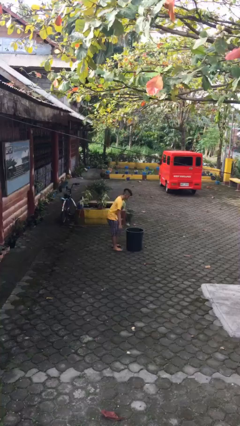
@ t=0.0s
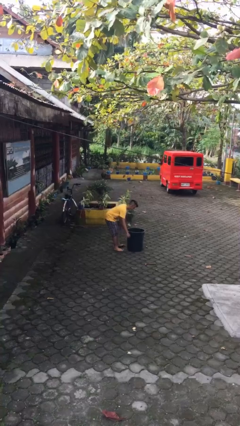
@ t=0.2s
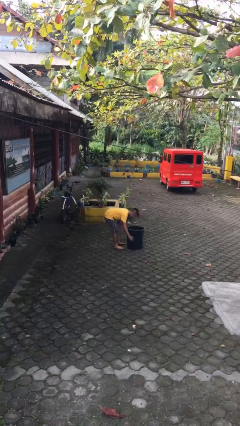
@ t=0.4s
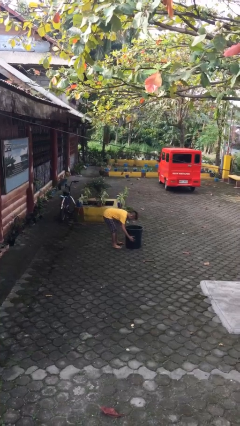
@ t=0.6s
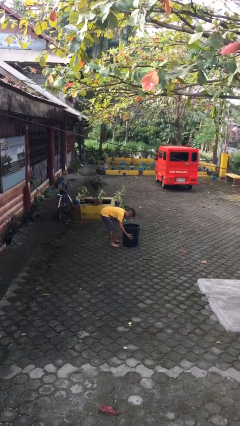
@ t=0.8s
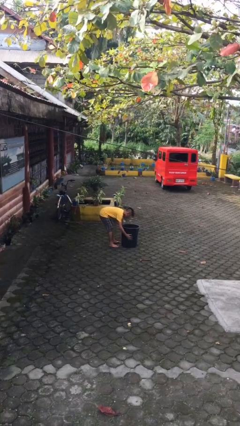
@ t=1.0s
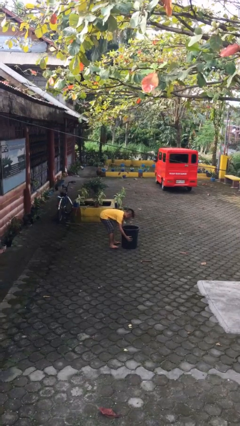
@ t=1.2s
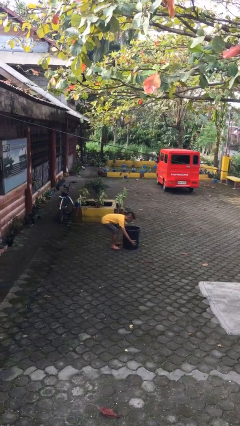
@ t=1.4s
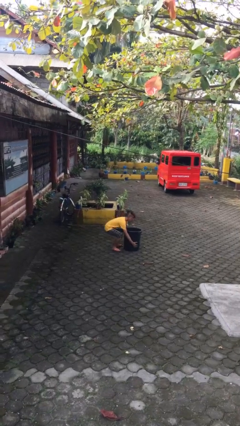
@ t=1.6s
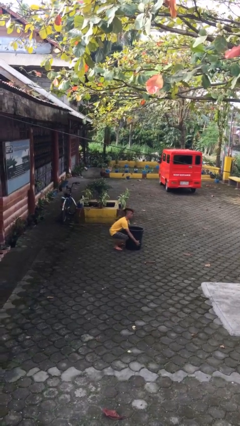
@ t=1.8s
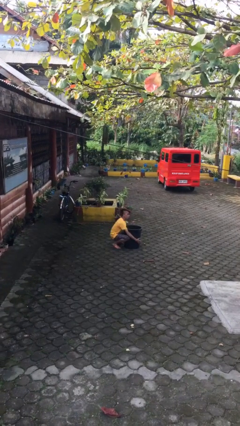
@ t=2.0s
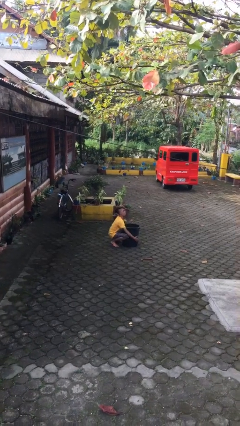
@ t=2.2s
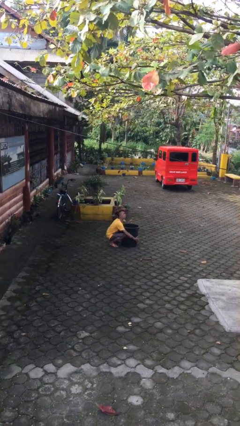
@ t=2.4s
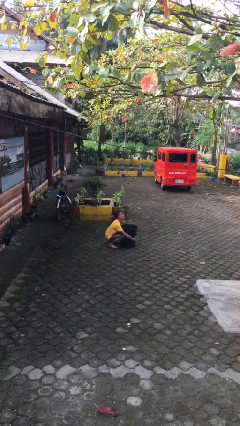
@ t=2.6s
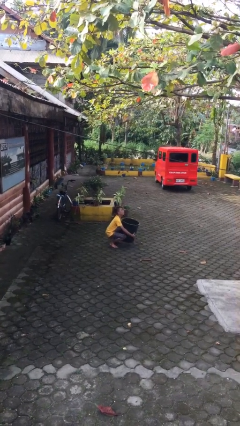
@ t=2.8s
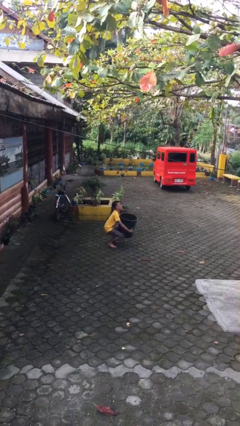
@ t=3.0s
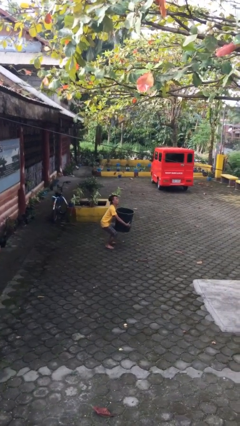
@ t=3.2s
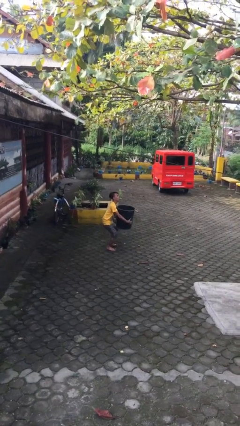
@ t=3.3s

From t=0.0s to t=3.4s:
person picks up object from floor

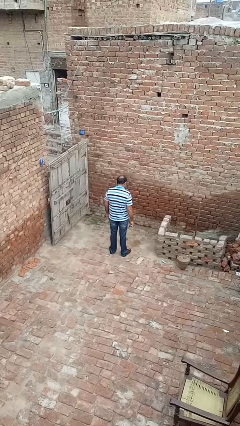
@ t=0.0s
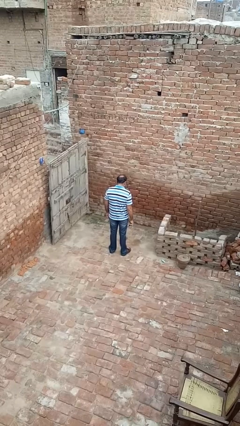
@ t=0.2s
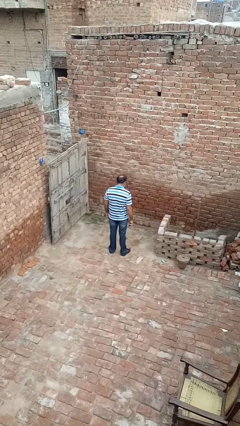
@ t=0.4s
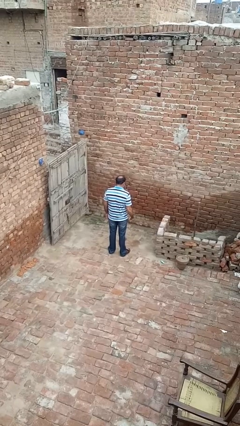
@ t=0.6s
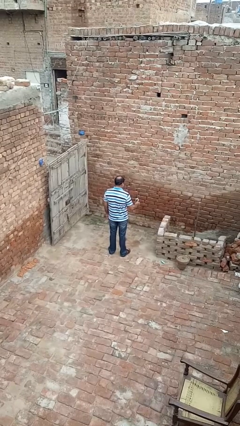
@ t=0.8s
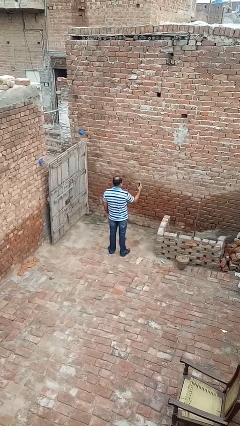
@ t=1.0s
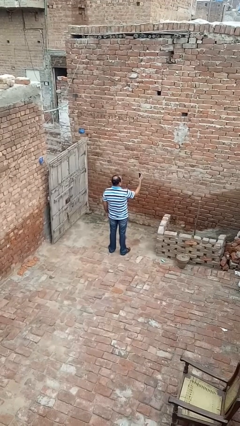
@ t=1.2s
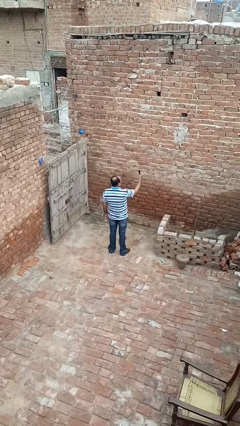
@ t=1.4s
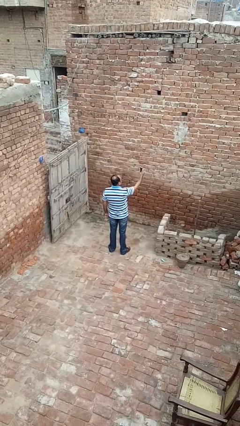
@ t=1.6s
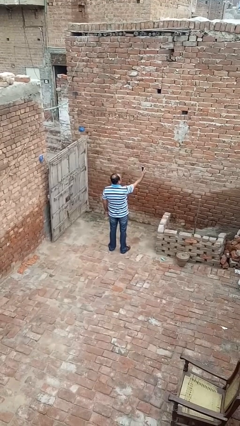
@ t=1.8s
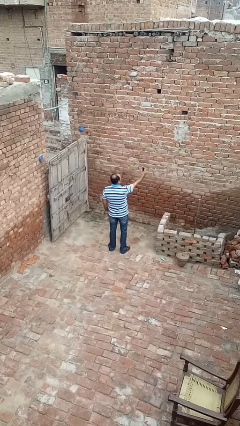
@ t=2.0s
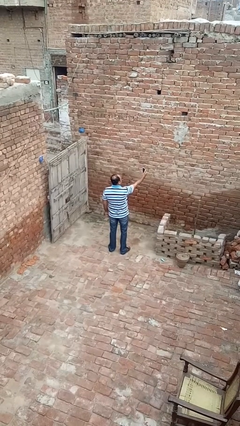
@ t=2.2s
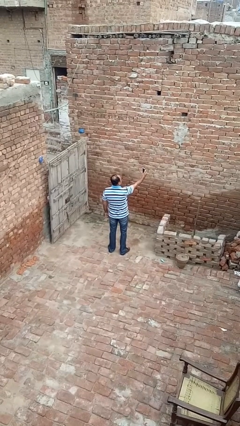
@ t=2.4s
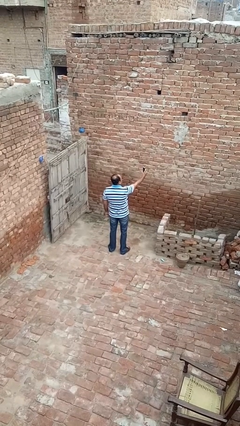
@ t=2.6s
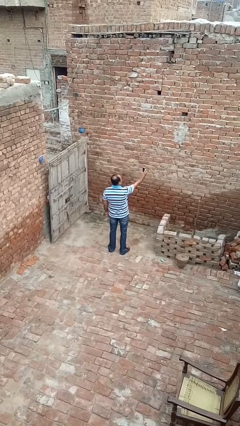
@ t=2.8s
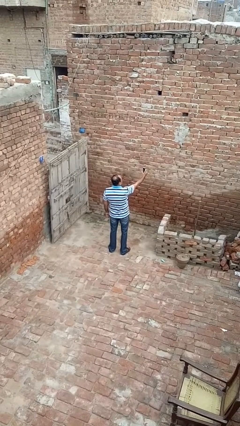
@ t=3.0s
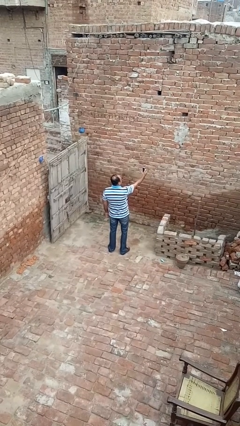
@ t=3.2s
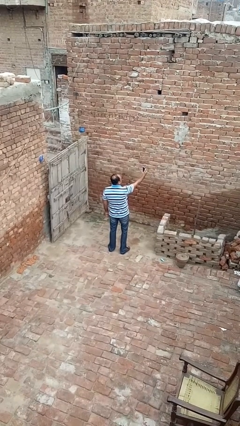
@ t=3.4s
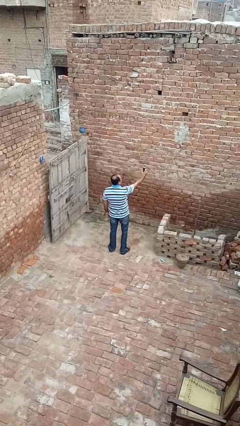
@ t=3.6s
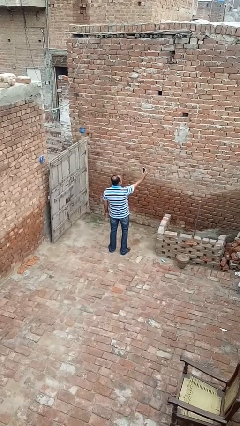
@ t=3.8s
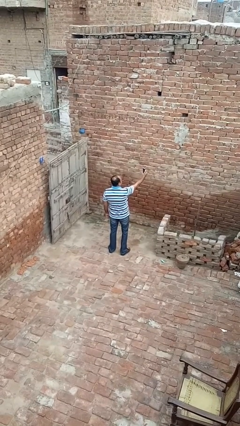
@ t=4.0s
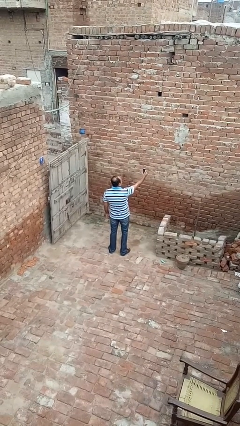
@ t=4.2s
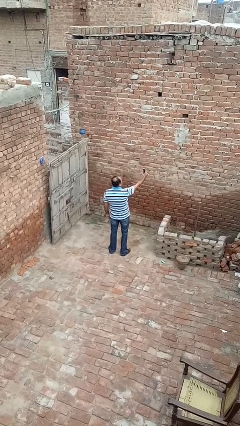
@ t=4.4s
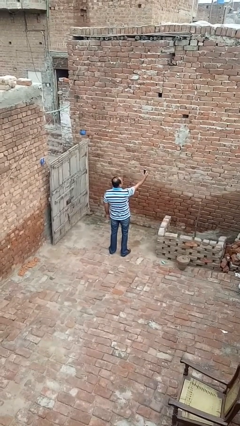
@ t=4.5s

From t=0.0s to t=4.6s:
person takes selfie

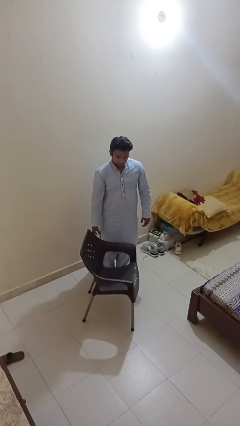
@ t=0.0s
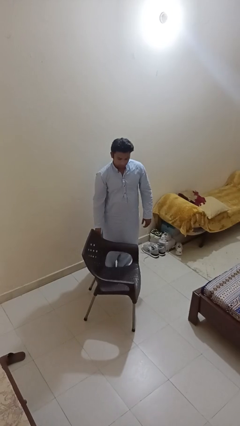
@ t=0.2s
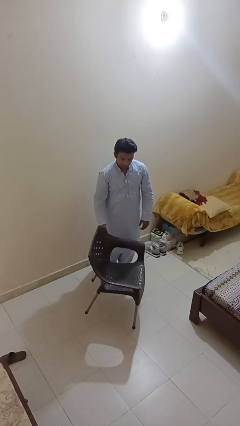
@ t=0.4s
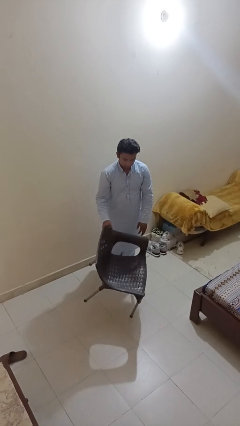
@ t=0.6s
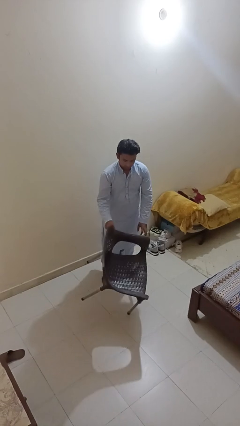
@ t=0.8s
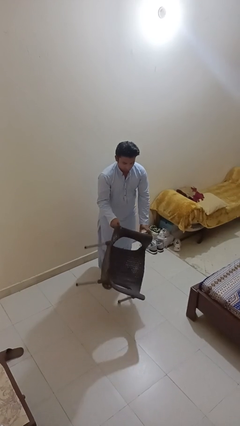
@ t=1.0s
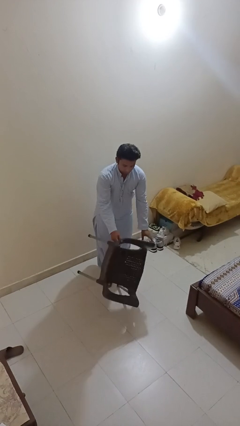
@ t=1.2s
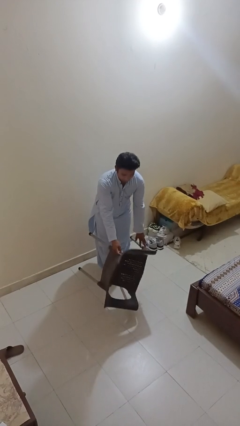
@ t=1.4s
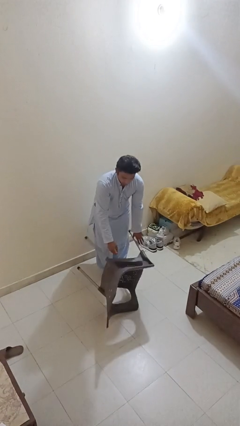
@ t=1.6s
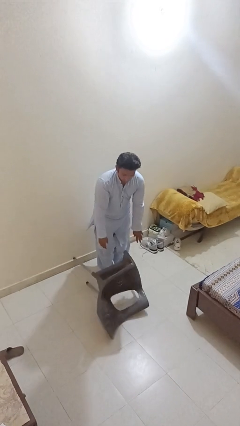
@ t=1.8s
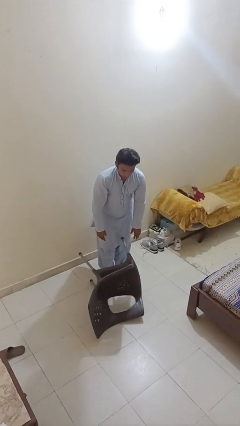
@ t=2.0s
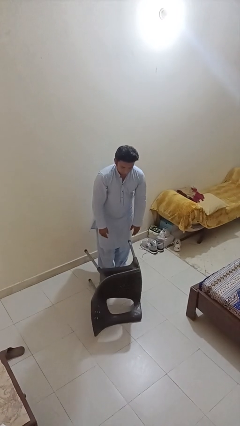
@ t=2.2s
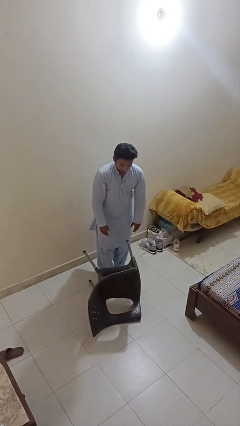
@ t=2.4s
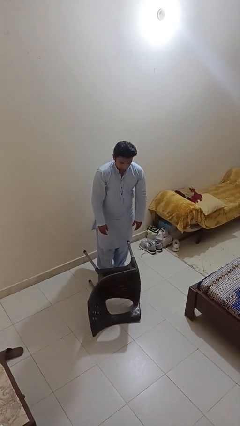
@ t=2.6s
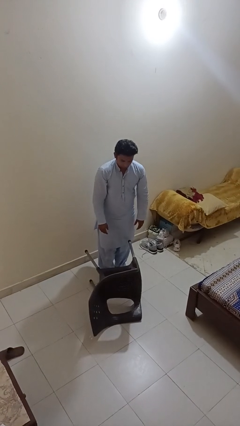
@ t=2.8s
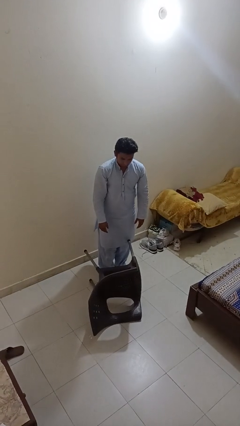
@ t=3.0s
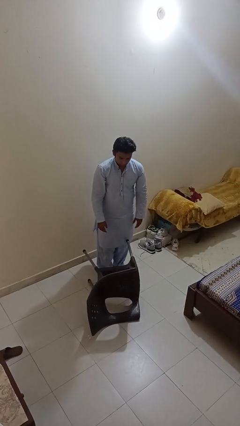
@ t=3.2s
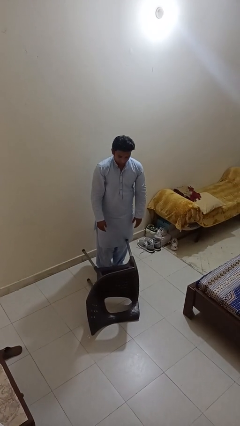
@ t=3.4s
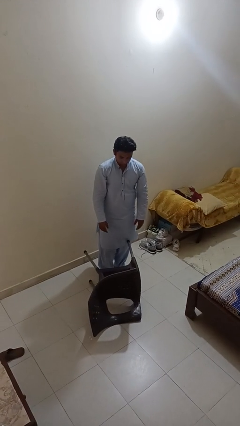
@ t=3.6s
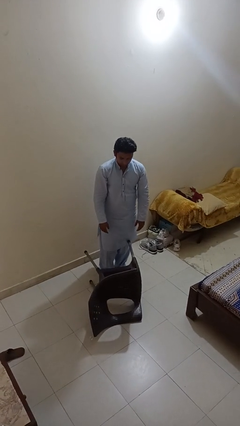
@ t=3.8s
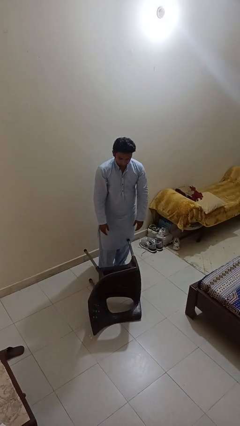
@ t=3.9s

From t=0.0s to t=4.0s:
person knocks over furniture

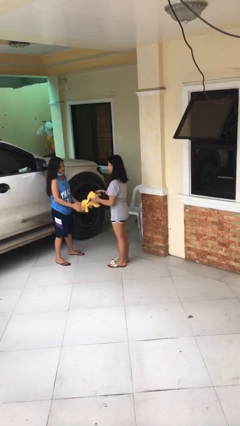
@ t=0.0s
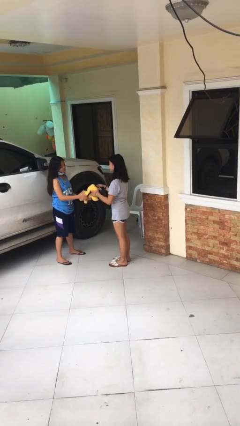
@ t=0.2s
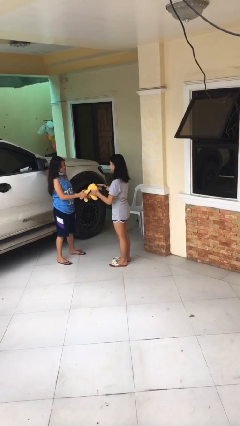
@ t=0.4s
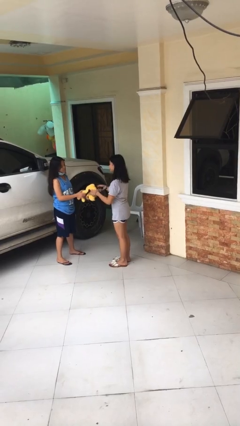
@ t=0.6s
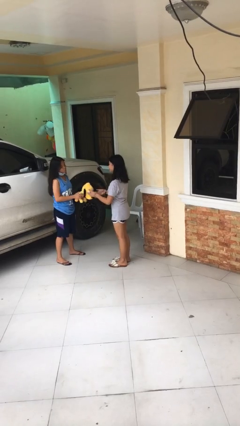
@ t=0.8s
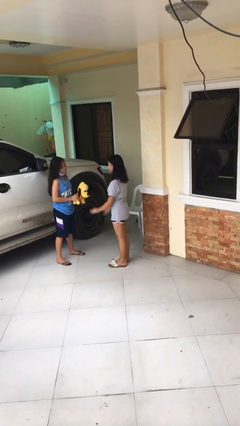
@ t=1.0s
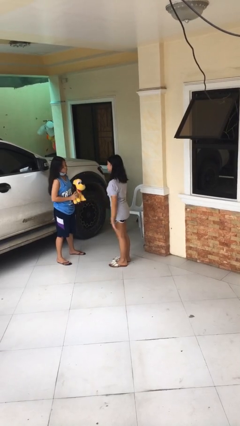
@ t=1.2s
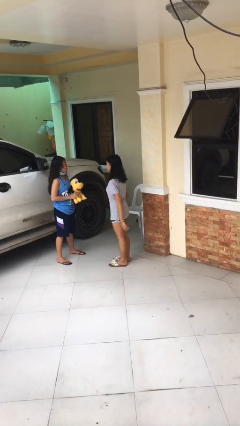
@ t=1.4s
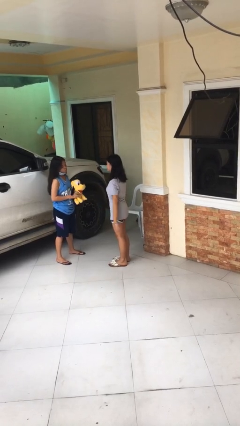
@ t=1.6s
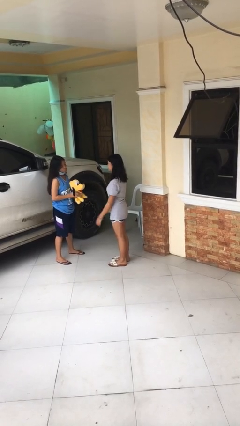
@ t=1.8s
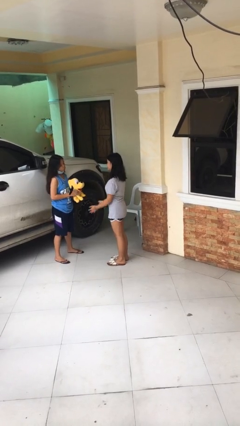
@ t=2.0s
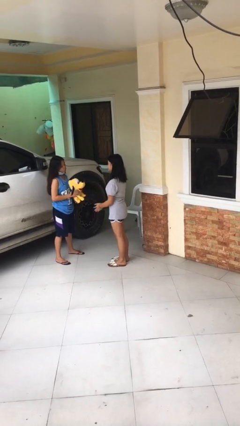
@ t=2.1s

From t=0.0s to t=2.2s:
person transfers object to person

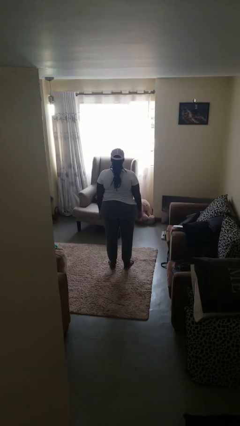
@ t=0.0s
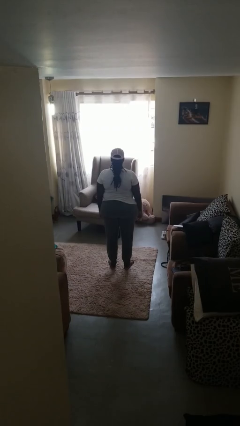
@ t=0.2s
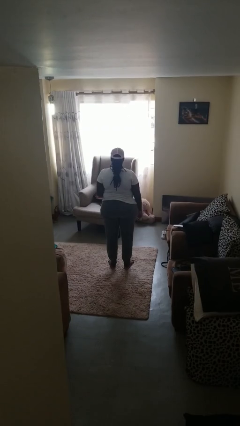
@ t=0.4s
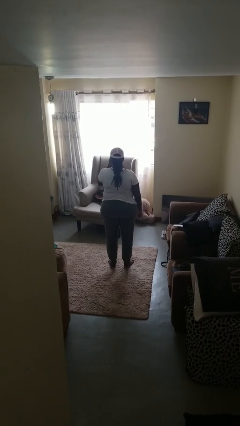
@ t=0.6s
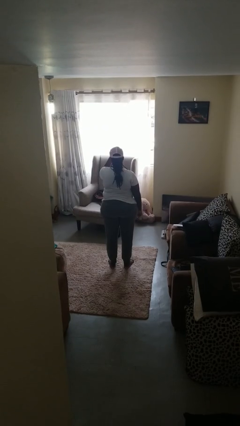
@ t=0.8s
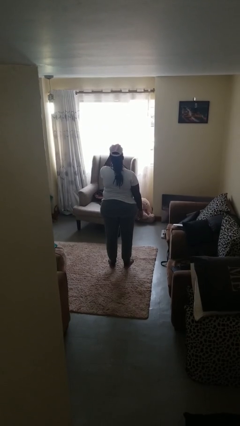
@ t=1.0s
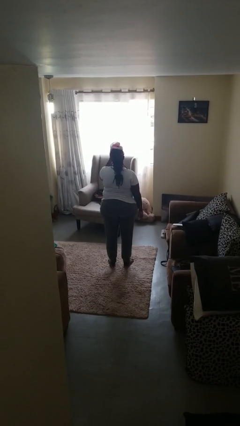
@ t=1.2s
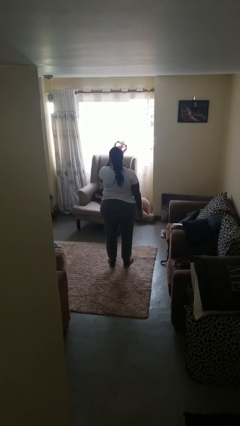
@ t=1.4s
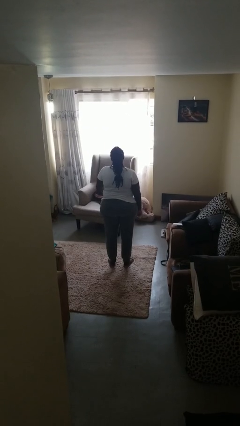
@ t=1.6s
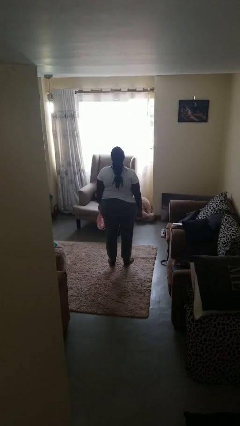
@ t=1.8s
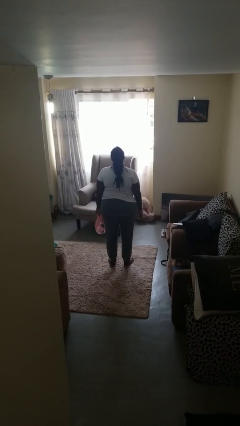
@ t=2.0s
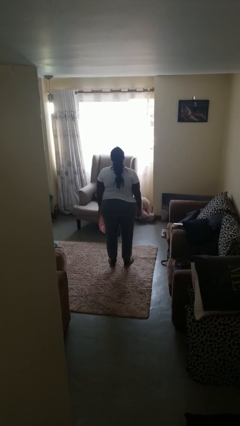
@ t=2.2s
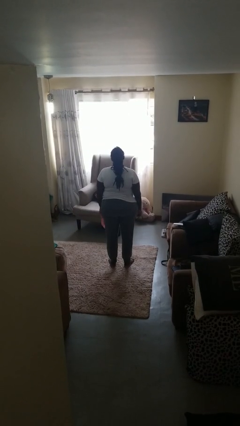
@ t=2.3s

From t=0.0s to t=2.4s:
person takes off hat

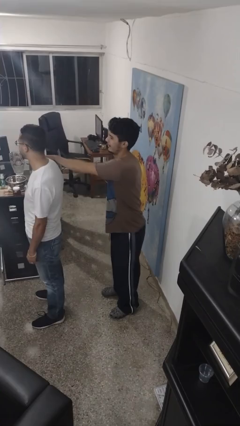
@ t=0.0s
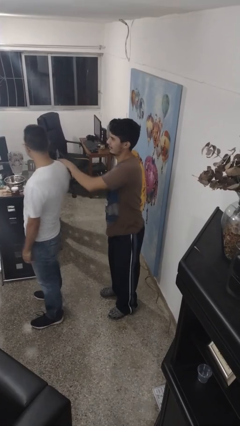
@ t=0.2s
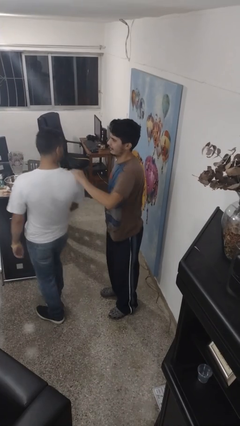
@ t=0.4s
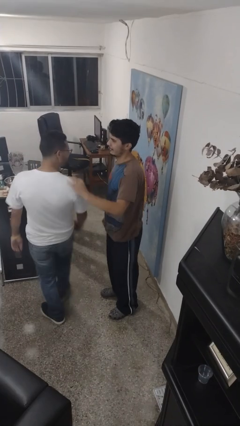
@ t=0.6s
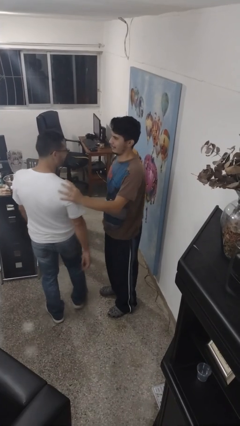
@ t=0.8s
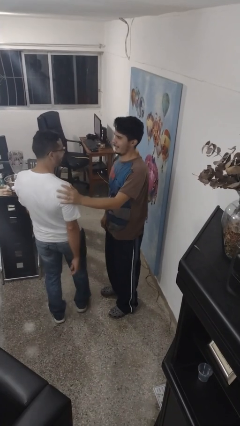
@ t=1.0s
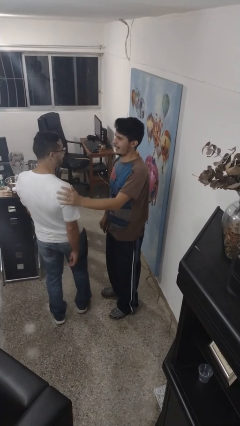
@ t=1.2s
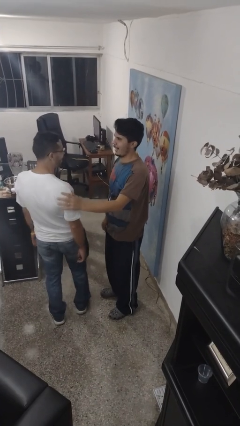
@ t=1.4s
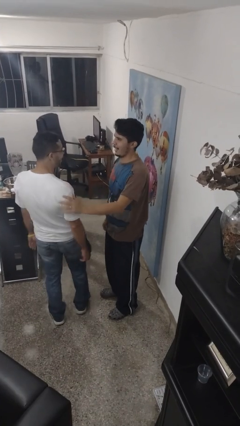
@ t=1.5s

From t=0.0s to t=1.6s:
person spins person around
